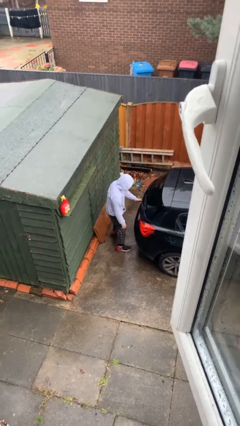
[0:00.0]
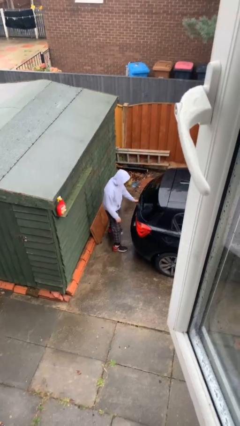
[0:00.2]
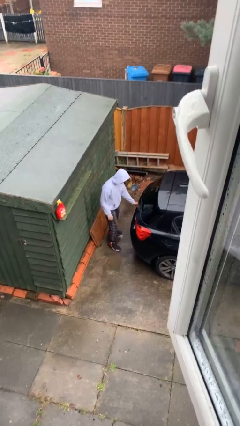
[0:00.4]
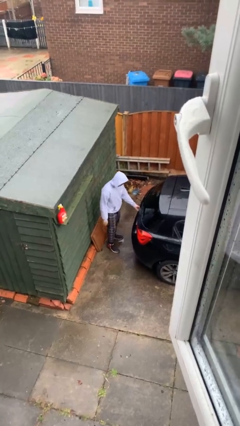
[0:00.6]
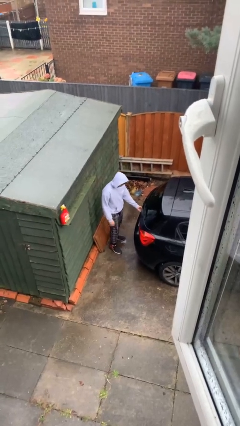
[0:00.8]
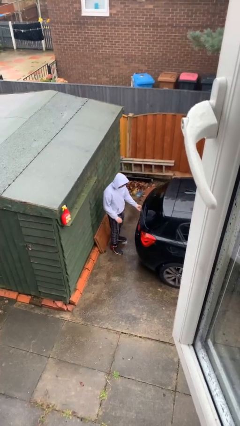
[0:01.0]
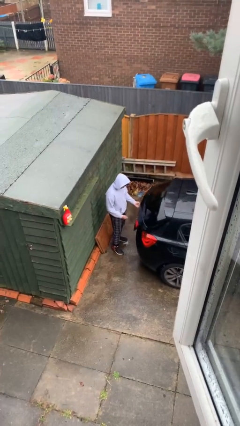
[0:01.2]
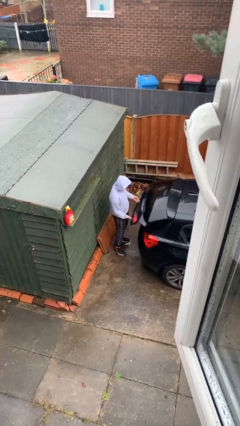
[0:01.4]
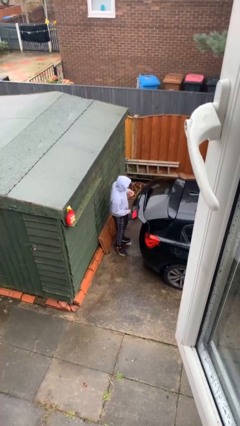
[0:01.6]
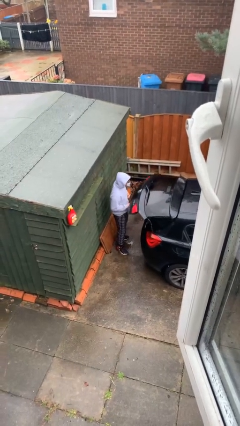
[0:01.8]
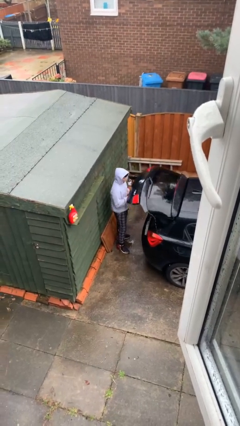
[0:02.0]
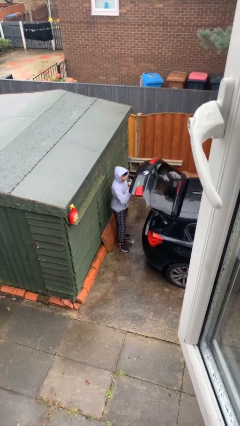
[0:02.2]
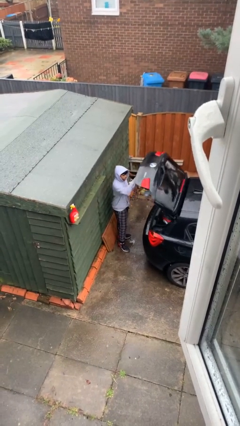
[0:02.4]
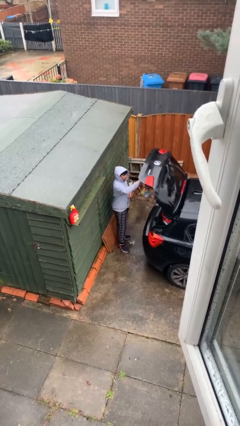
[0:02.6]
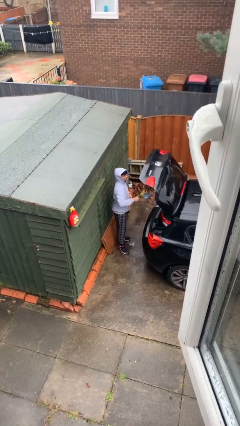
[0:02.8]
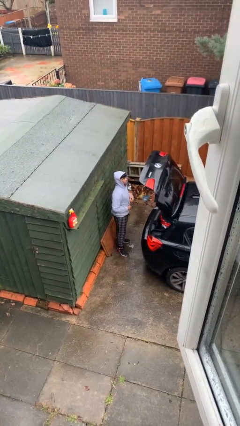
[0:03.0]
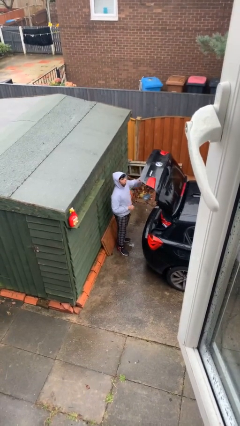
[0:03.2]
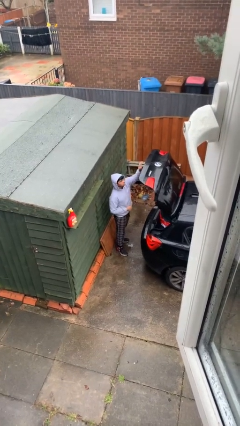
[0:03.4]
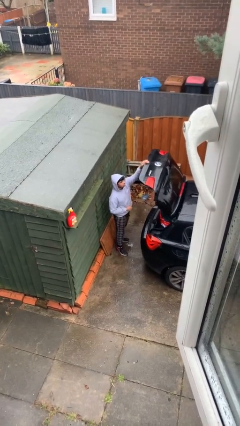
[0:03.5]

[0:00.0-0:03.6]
person opens car trunk

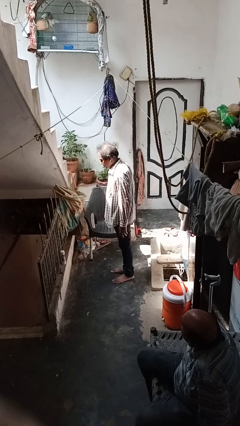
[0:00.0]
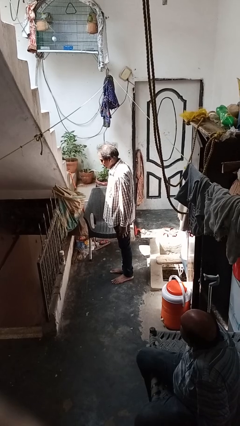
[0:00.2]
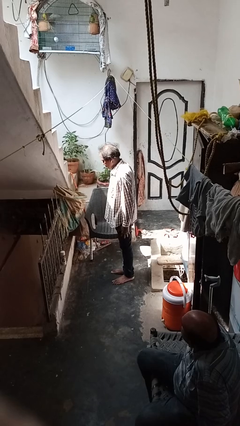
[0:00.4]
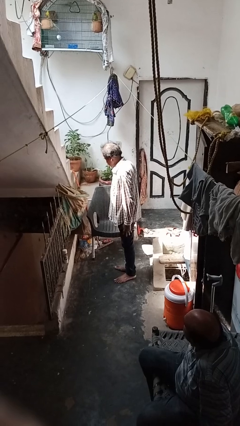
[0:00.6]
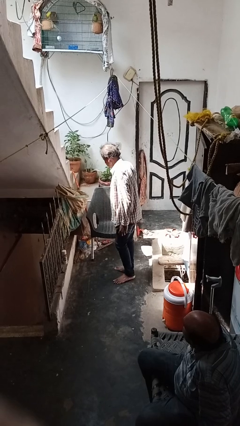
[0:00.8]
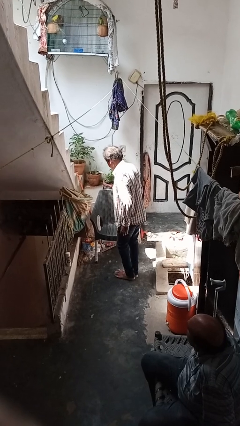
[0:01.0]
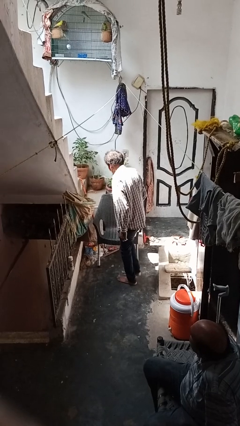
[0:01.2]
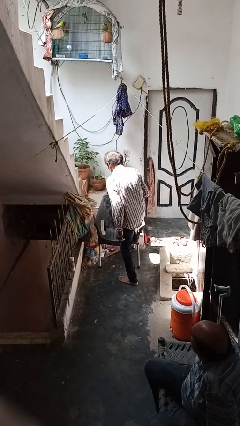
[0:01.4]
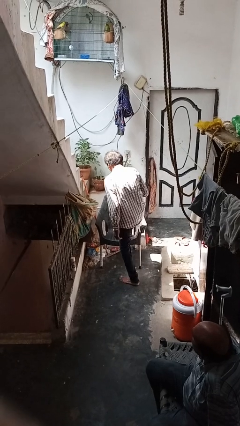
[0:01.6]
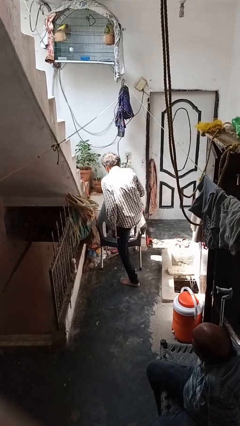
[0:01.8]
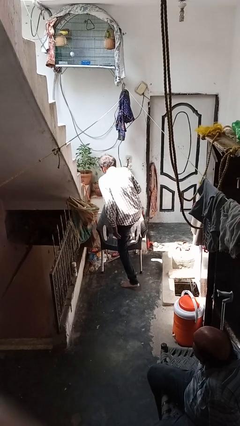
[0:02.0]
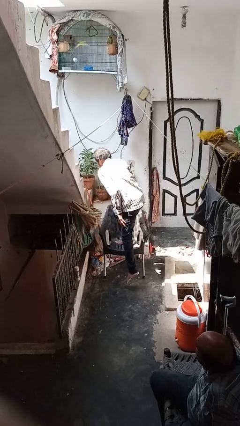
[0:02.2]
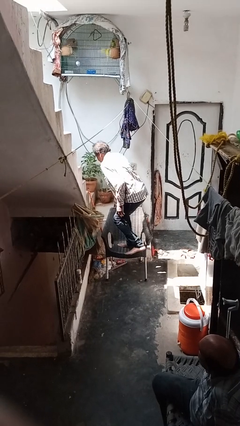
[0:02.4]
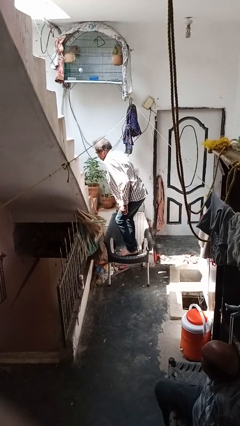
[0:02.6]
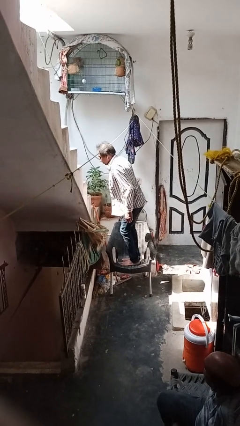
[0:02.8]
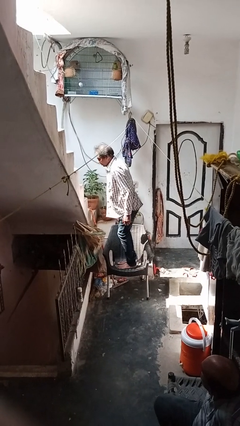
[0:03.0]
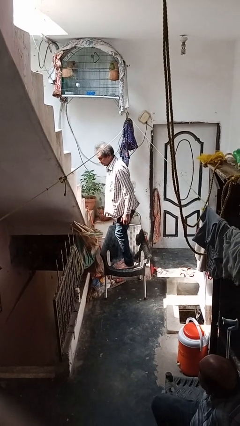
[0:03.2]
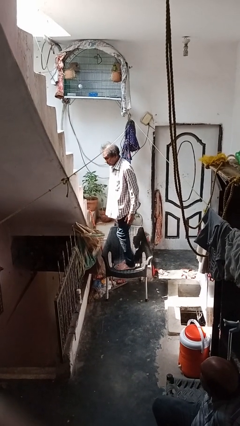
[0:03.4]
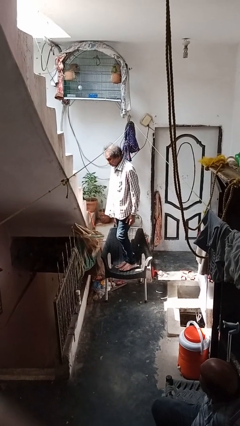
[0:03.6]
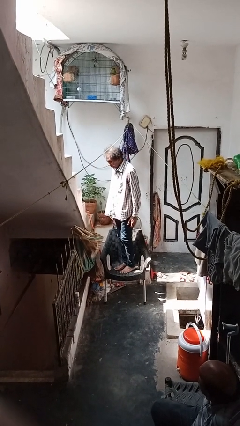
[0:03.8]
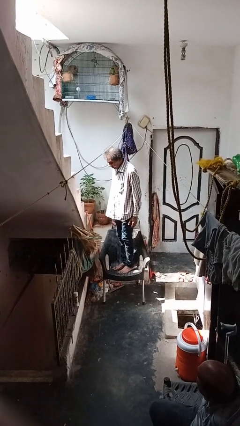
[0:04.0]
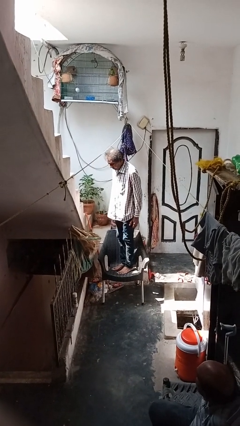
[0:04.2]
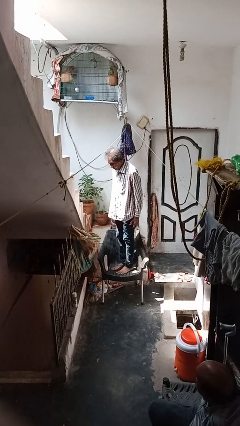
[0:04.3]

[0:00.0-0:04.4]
person climbs on chair

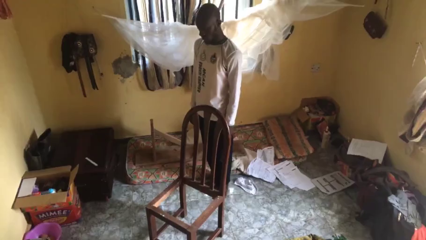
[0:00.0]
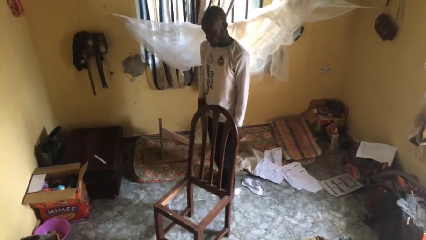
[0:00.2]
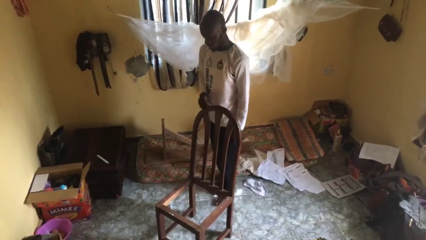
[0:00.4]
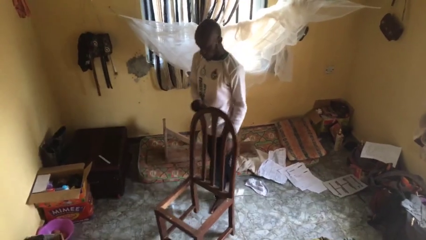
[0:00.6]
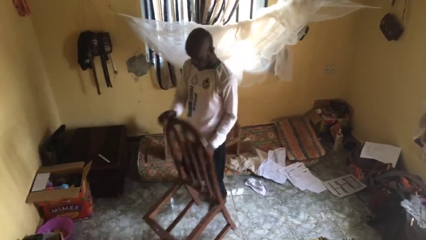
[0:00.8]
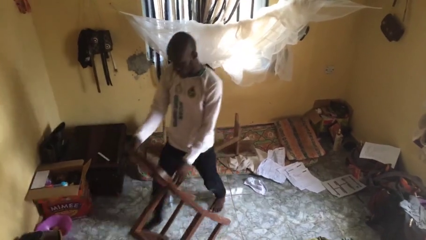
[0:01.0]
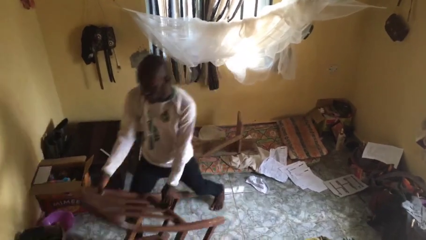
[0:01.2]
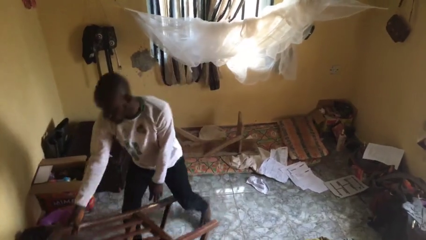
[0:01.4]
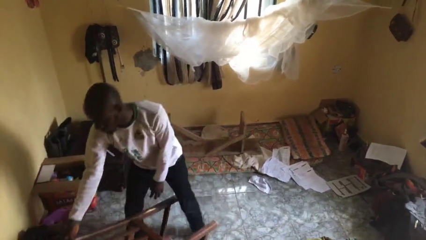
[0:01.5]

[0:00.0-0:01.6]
person knocks over furniture

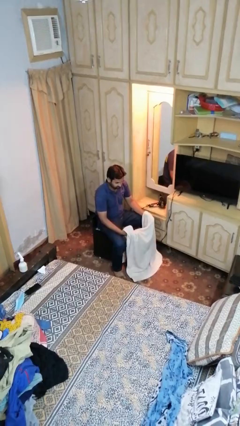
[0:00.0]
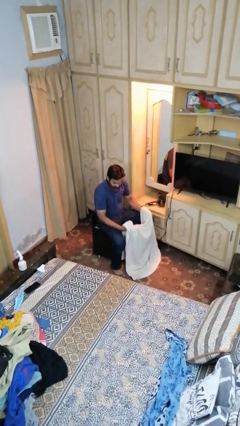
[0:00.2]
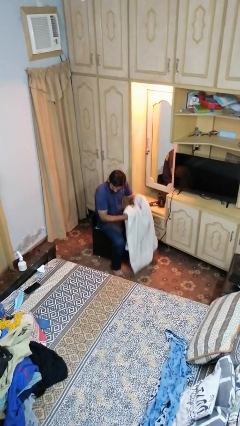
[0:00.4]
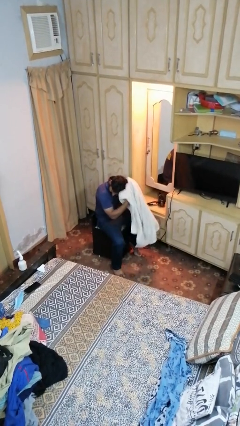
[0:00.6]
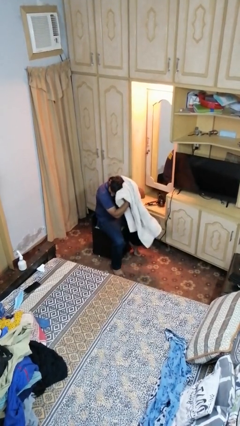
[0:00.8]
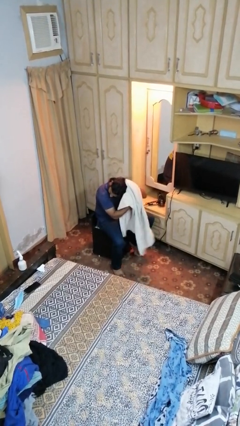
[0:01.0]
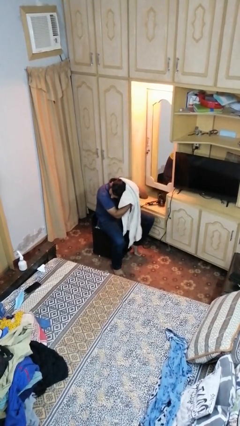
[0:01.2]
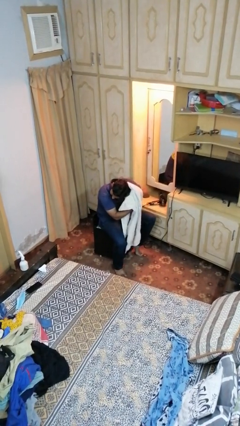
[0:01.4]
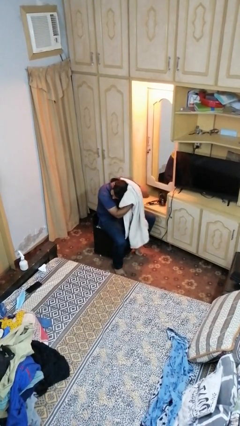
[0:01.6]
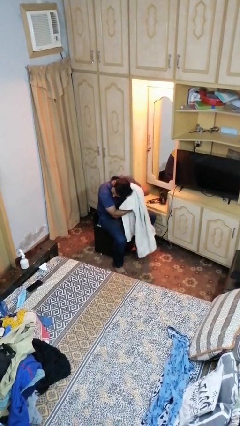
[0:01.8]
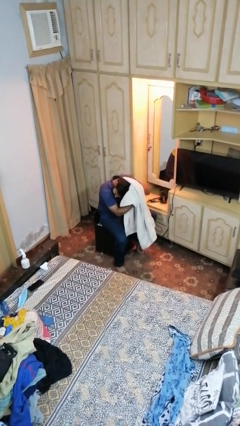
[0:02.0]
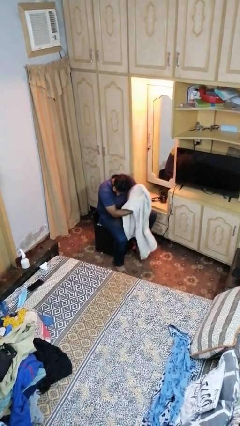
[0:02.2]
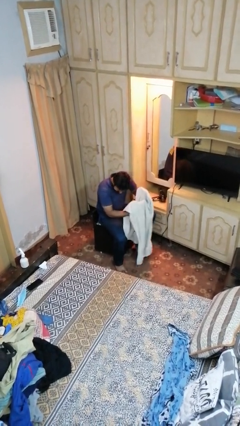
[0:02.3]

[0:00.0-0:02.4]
person dries hair with towel

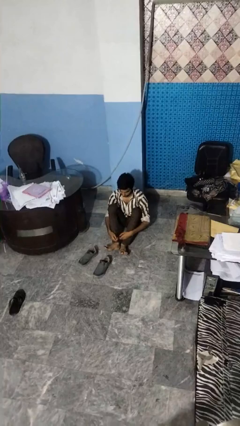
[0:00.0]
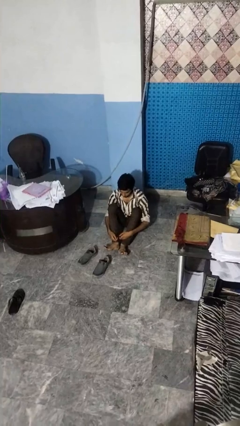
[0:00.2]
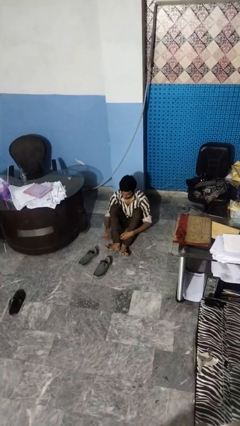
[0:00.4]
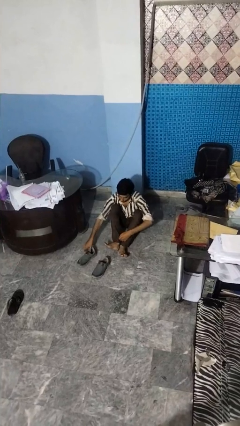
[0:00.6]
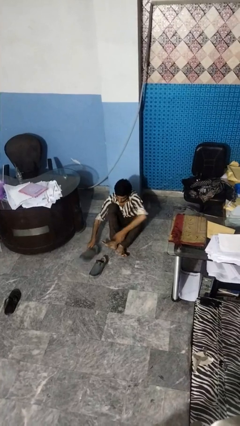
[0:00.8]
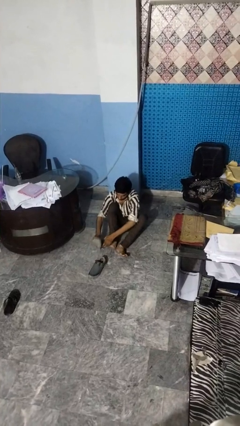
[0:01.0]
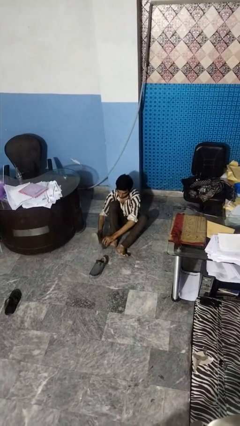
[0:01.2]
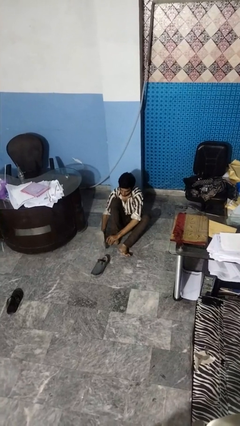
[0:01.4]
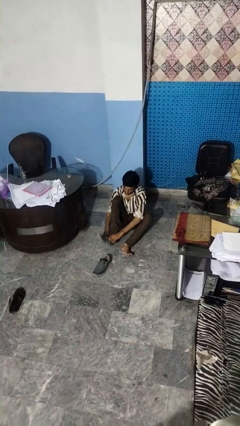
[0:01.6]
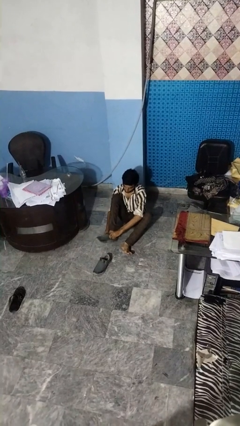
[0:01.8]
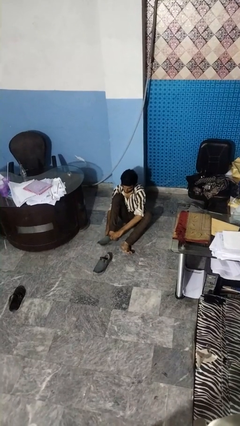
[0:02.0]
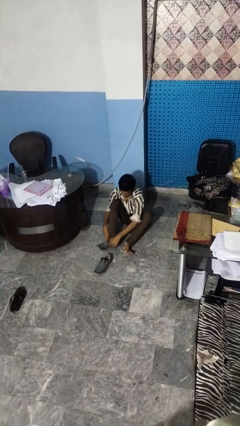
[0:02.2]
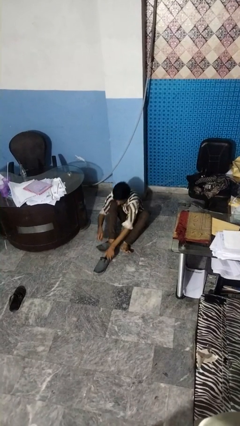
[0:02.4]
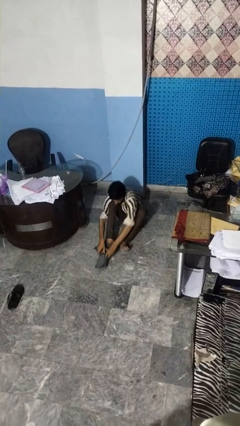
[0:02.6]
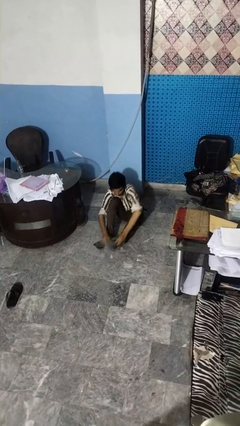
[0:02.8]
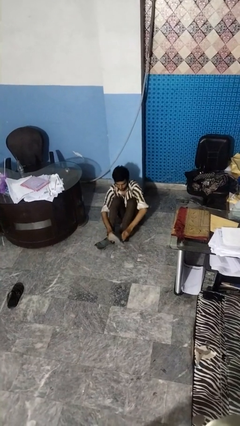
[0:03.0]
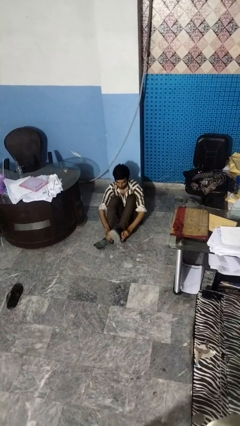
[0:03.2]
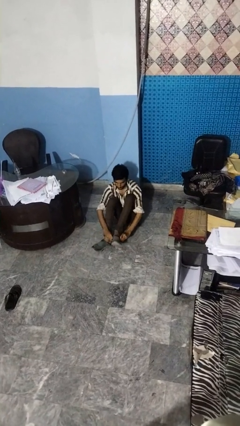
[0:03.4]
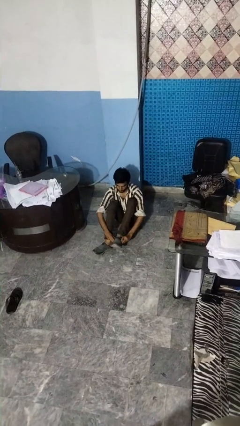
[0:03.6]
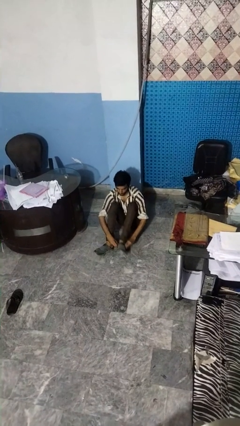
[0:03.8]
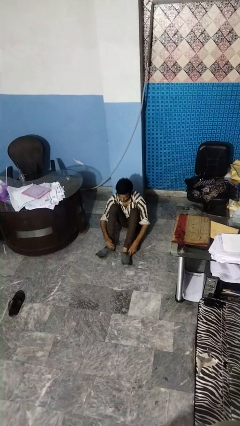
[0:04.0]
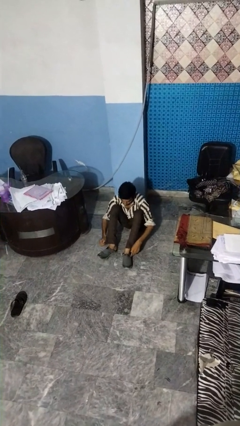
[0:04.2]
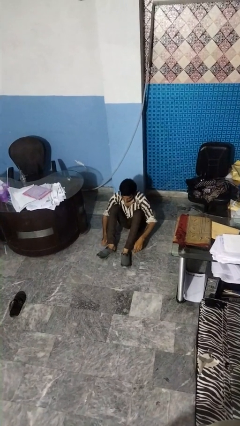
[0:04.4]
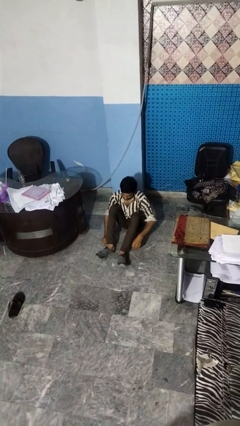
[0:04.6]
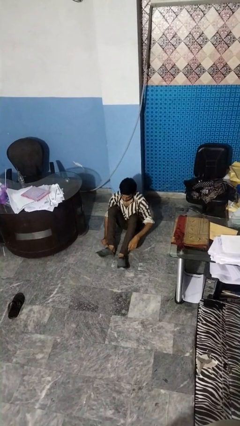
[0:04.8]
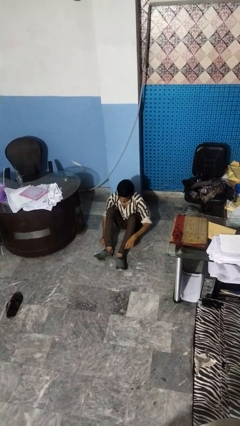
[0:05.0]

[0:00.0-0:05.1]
person puts on shoes
